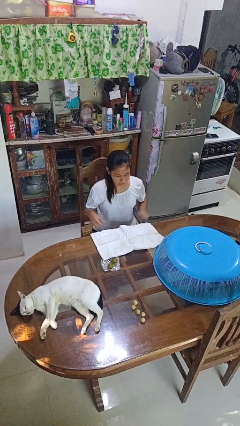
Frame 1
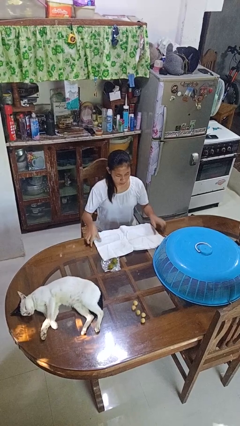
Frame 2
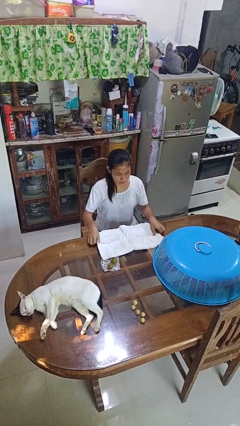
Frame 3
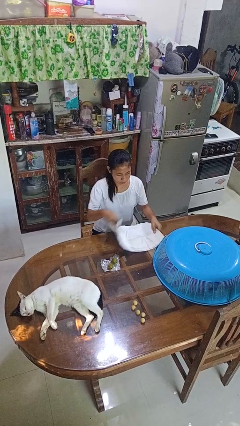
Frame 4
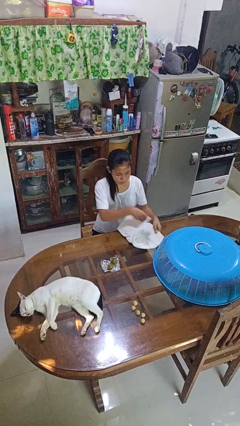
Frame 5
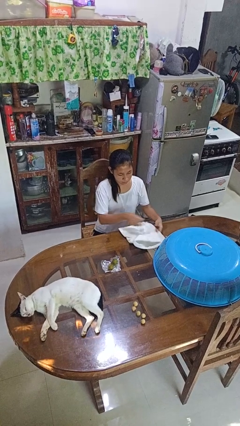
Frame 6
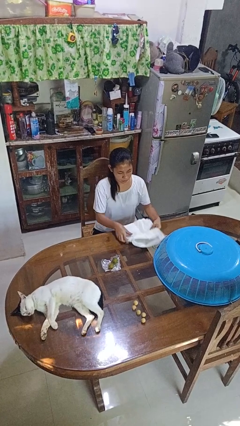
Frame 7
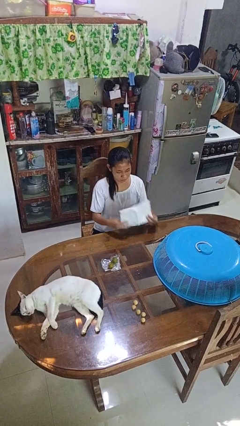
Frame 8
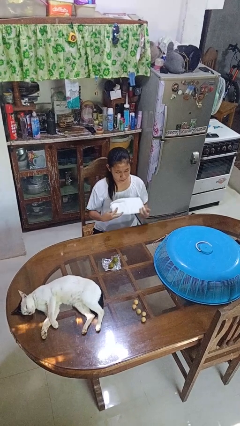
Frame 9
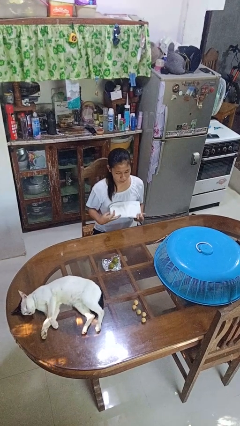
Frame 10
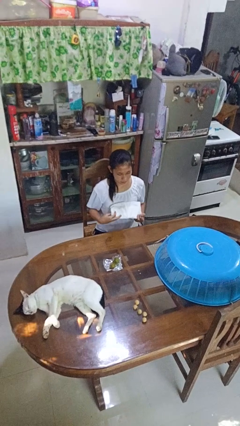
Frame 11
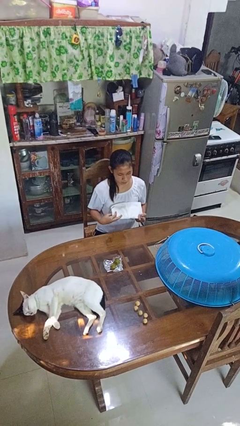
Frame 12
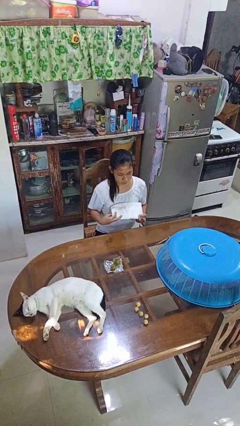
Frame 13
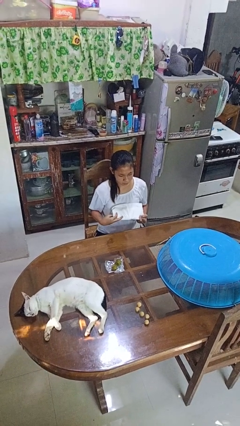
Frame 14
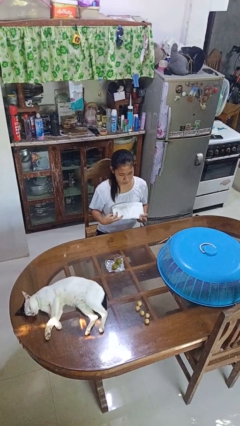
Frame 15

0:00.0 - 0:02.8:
person folds tablecloth

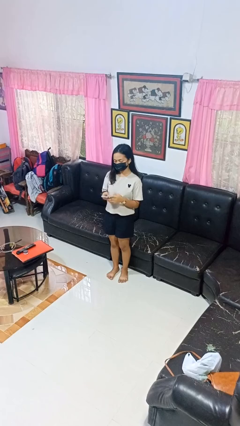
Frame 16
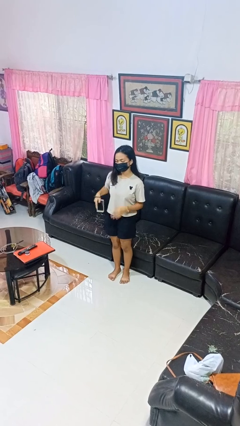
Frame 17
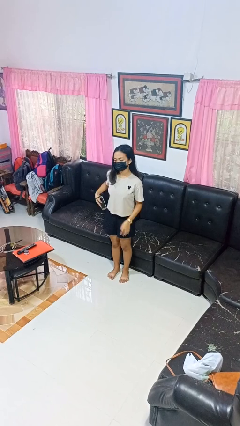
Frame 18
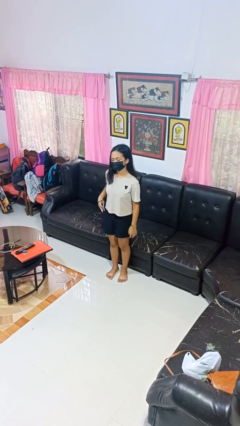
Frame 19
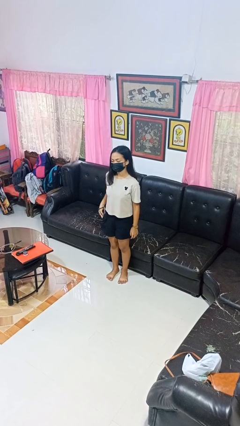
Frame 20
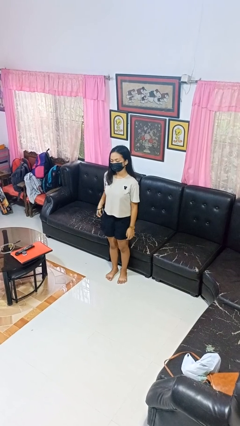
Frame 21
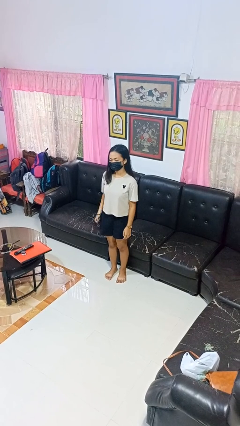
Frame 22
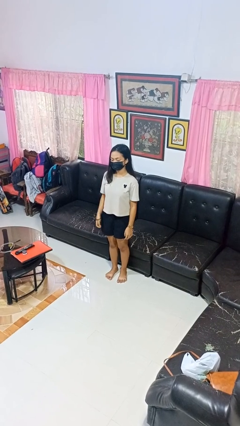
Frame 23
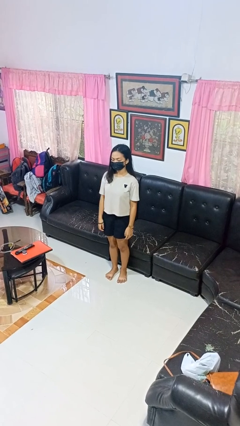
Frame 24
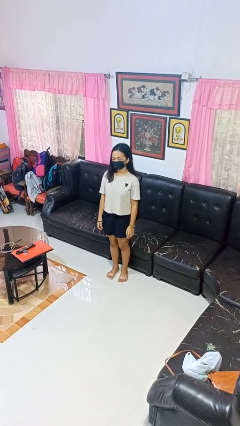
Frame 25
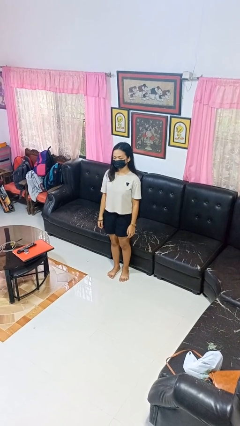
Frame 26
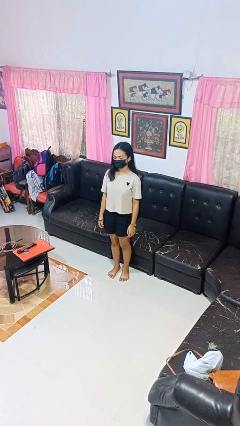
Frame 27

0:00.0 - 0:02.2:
person puts phone into pocket

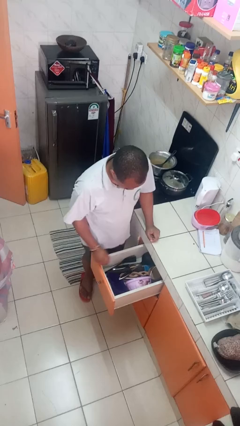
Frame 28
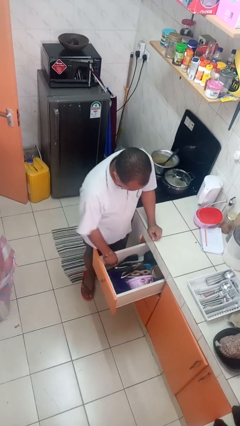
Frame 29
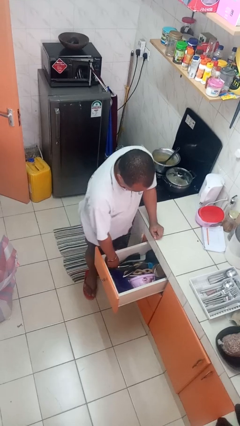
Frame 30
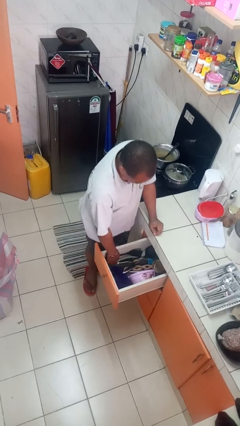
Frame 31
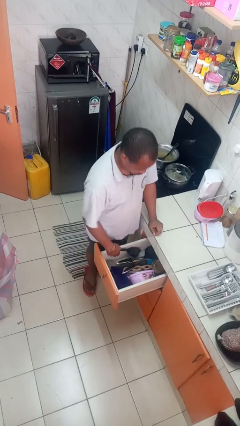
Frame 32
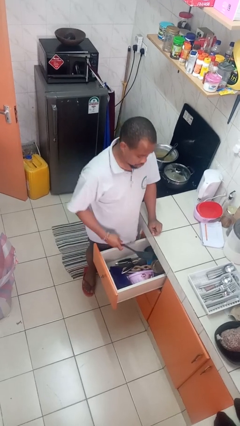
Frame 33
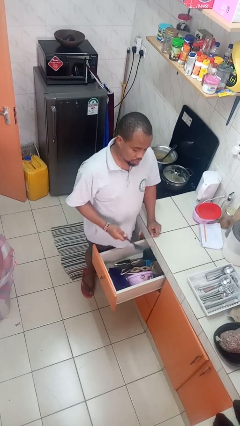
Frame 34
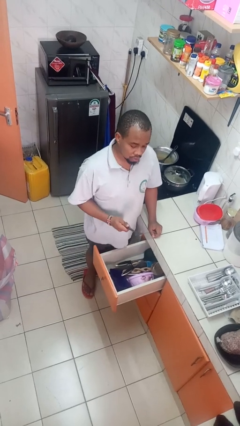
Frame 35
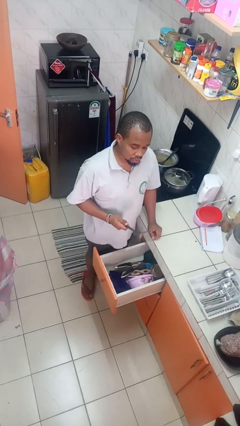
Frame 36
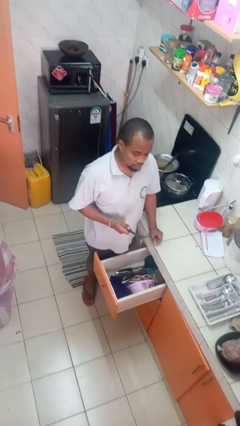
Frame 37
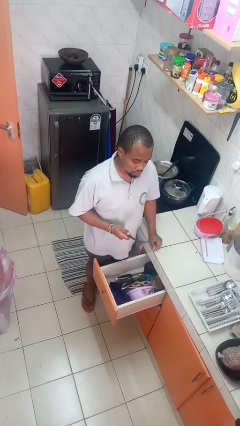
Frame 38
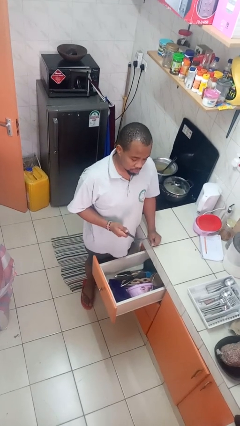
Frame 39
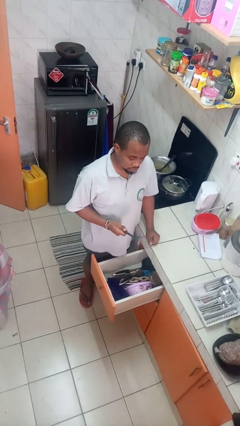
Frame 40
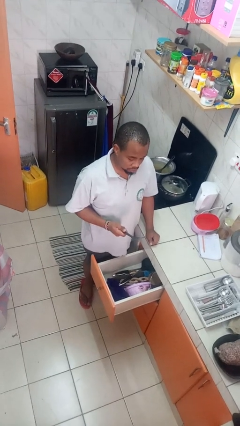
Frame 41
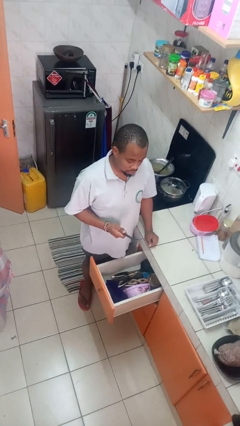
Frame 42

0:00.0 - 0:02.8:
person takes object from kitchen drawer

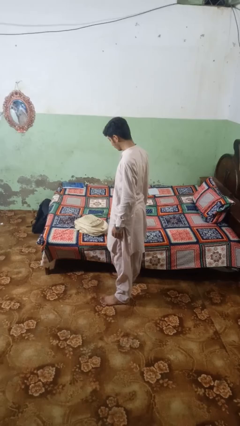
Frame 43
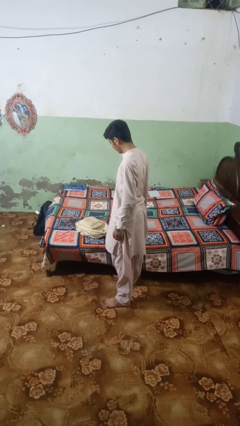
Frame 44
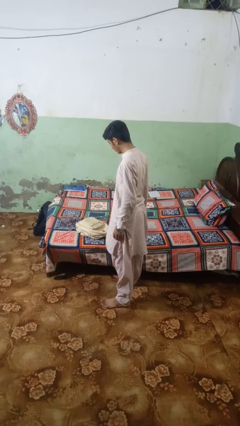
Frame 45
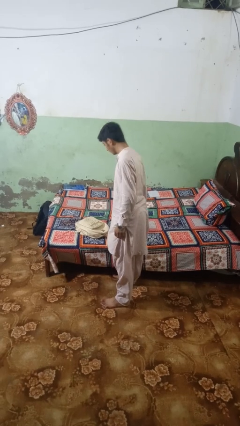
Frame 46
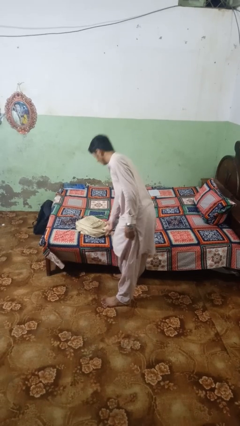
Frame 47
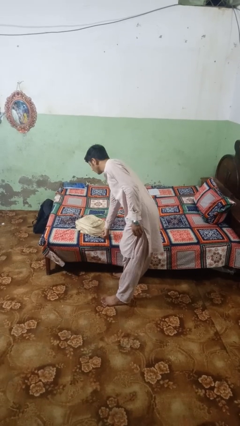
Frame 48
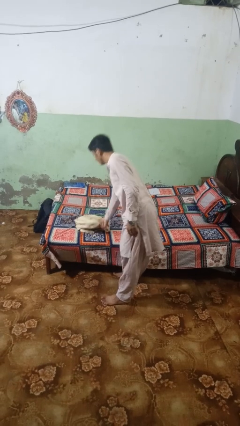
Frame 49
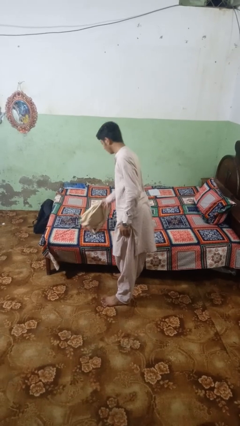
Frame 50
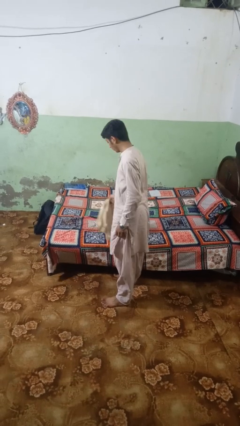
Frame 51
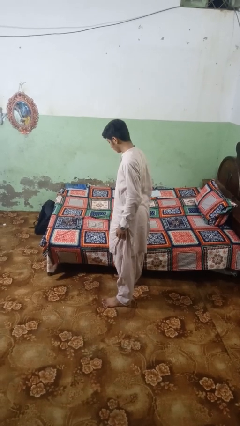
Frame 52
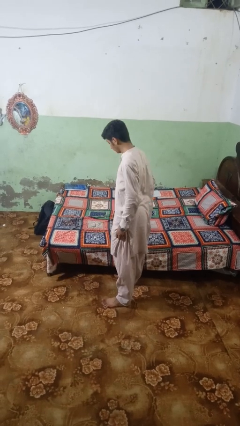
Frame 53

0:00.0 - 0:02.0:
person picks up object from bed

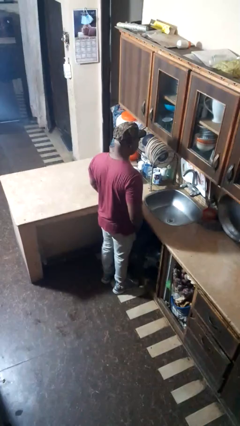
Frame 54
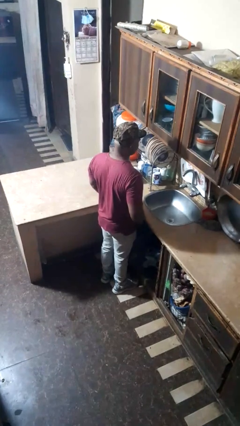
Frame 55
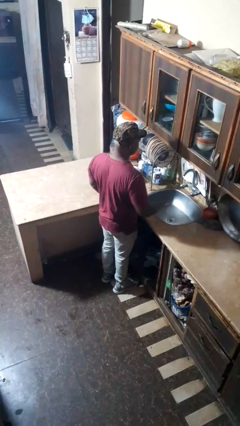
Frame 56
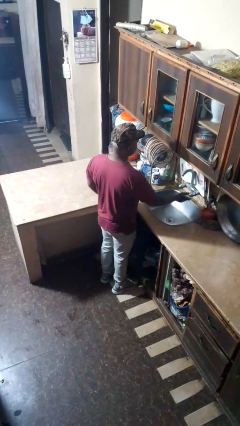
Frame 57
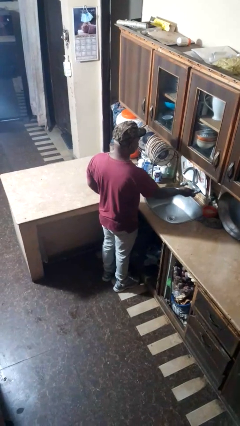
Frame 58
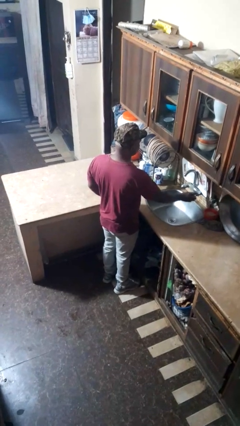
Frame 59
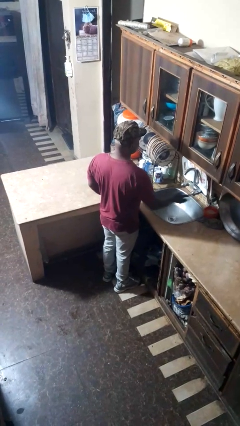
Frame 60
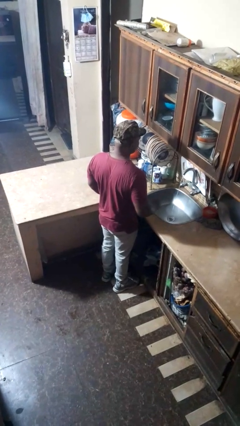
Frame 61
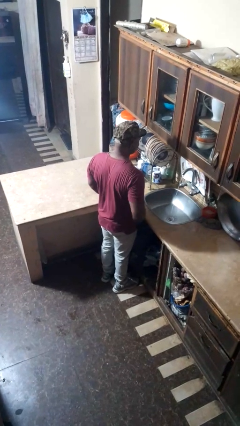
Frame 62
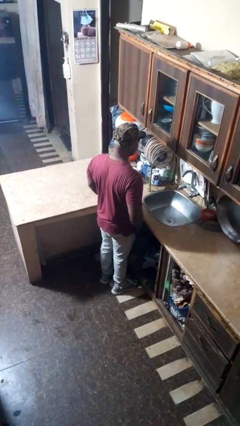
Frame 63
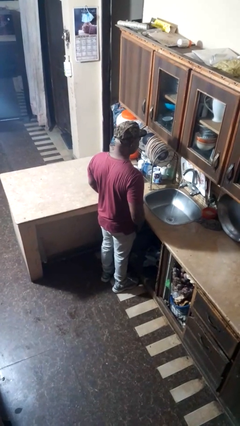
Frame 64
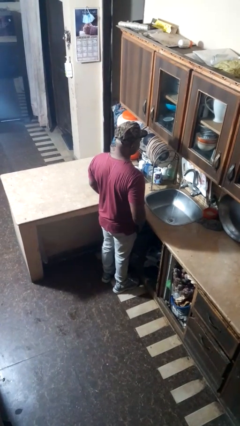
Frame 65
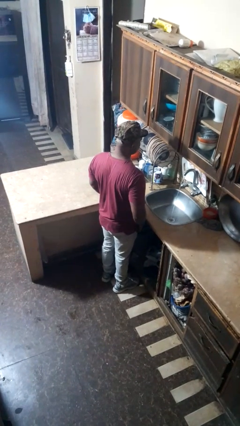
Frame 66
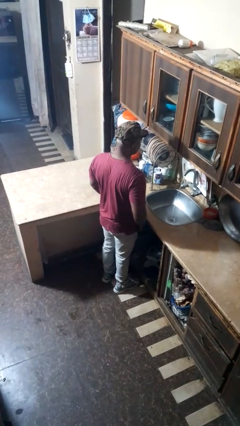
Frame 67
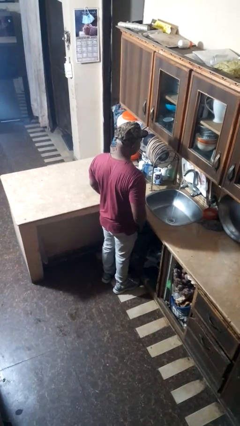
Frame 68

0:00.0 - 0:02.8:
person turns on faucet

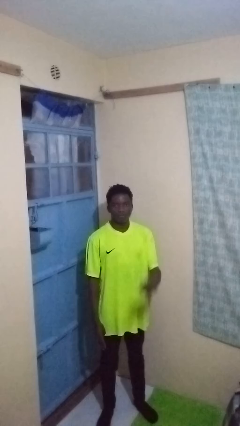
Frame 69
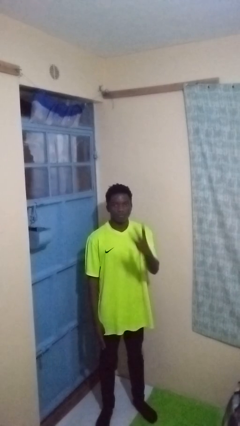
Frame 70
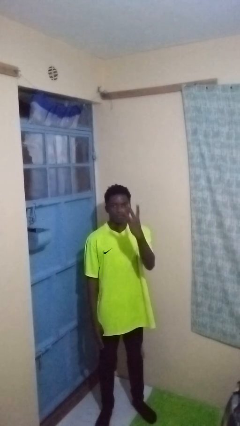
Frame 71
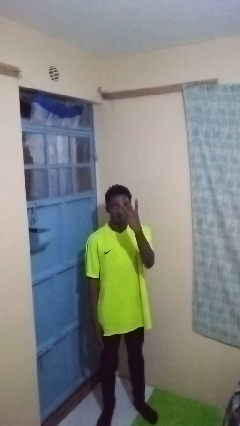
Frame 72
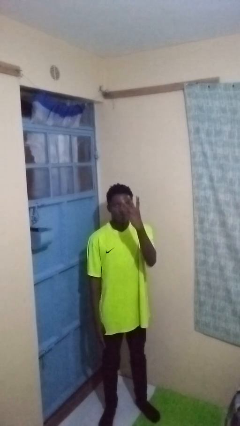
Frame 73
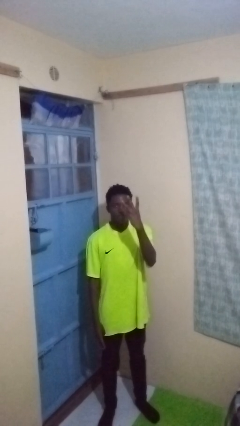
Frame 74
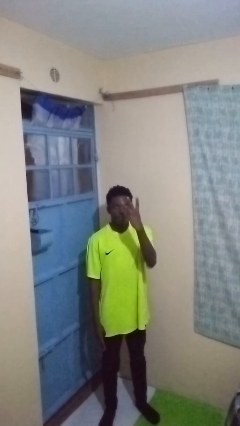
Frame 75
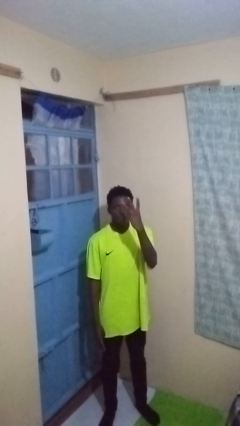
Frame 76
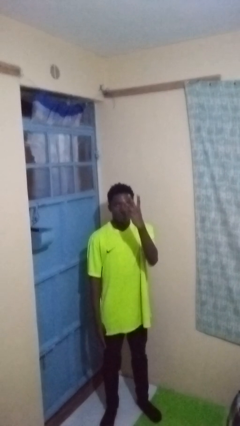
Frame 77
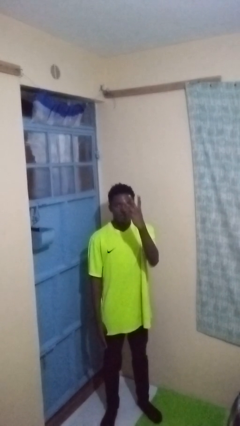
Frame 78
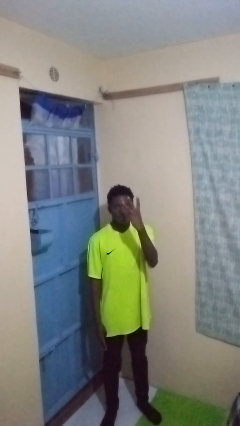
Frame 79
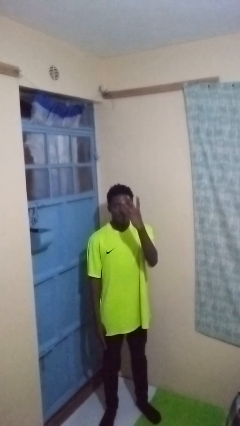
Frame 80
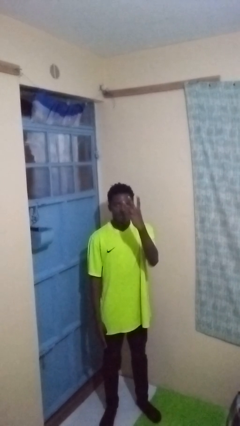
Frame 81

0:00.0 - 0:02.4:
person gestures number three

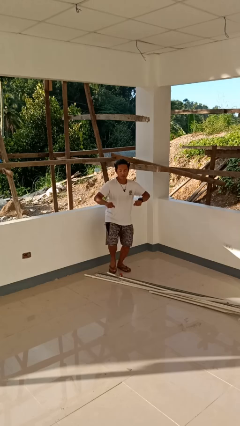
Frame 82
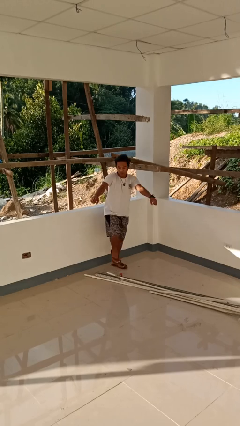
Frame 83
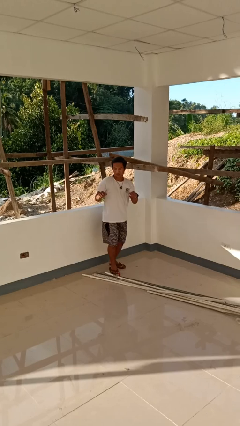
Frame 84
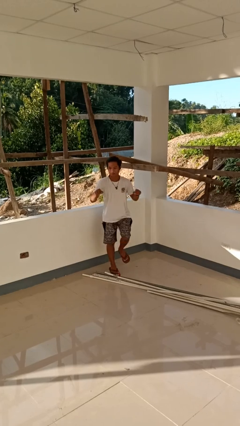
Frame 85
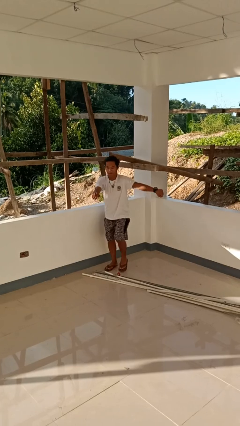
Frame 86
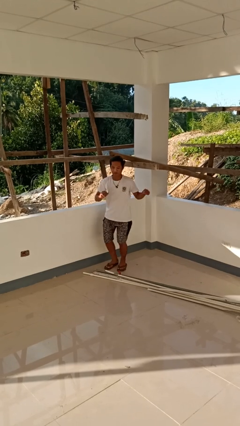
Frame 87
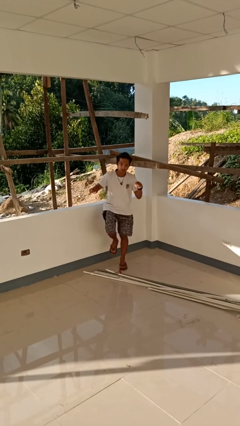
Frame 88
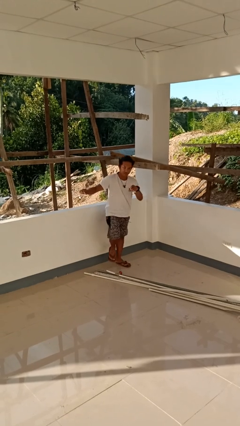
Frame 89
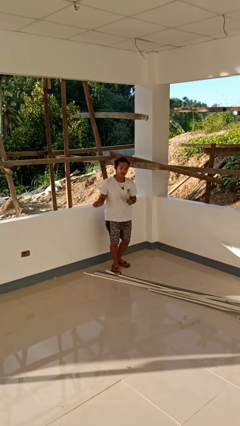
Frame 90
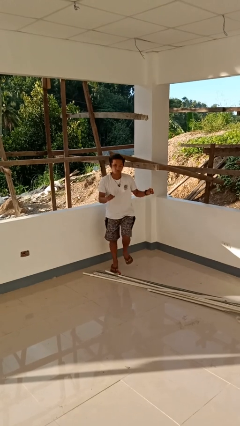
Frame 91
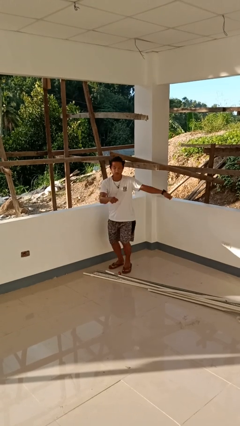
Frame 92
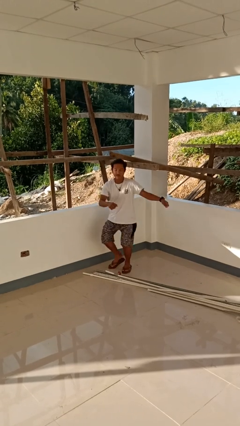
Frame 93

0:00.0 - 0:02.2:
person dances in place
